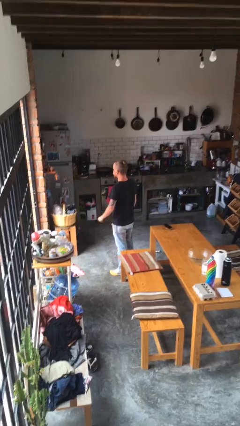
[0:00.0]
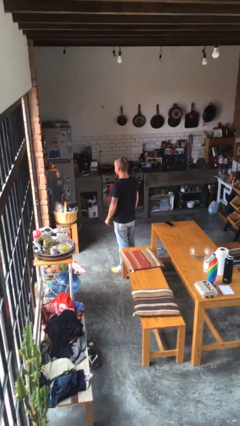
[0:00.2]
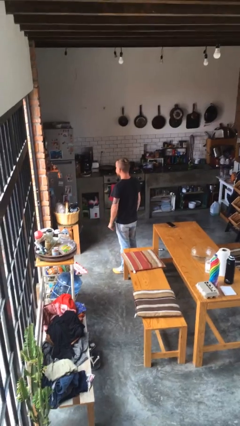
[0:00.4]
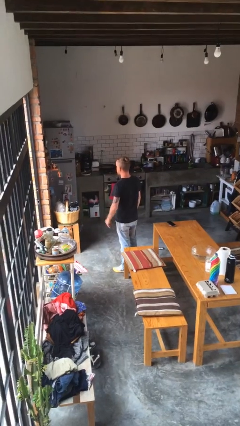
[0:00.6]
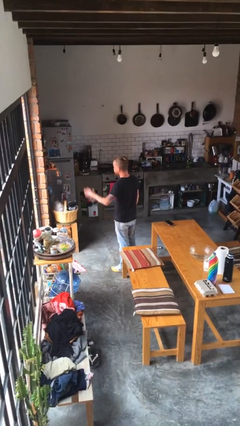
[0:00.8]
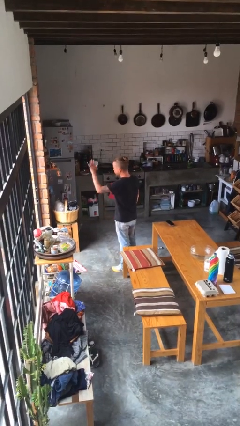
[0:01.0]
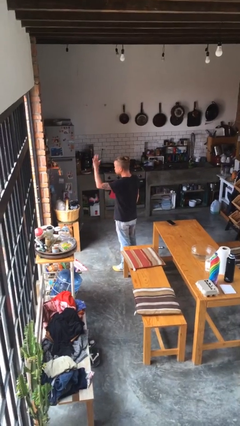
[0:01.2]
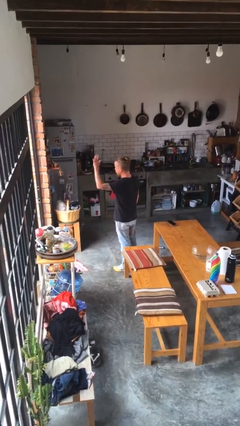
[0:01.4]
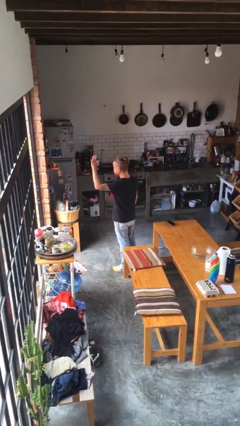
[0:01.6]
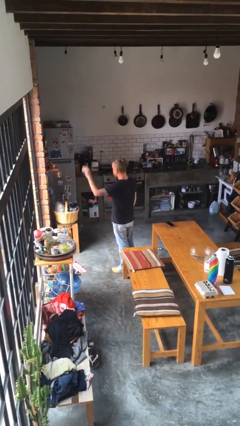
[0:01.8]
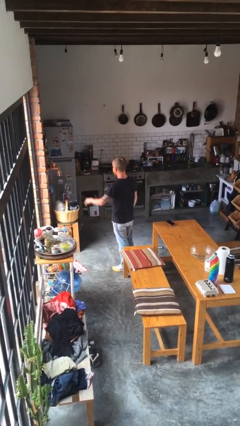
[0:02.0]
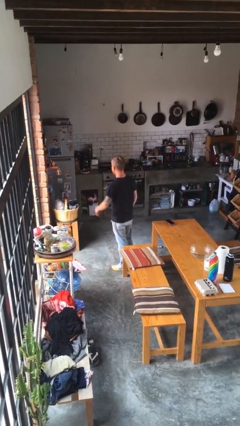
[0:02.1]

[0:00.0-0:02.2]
person gestures number five

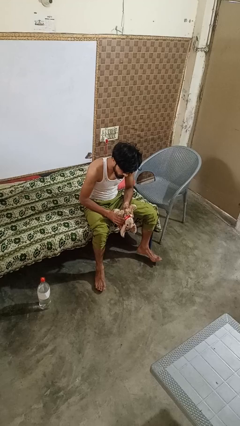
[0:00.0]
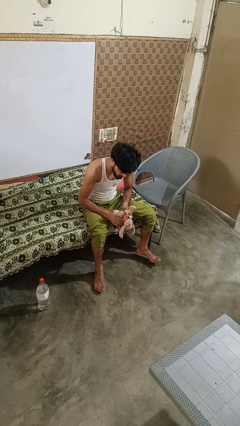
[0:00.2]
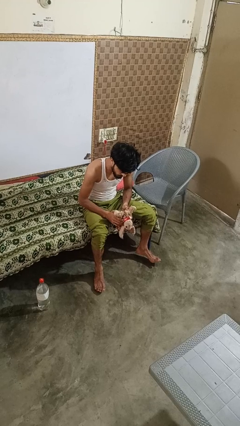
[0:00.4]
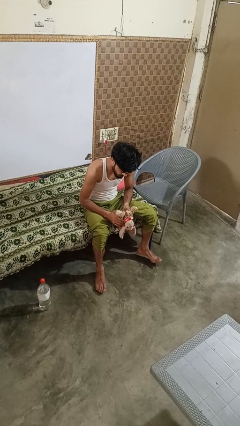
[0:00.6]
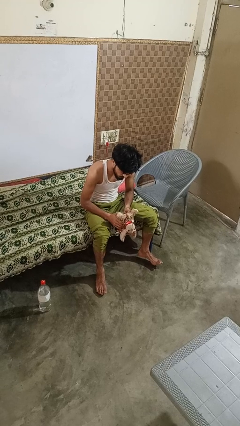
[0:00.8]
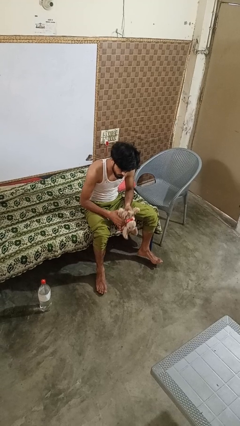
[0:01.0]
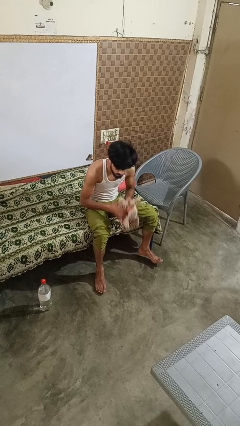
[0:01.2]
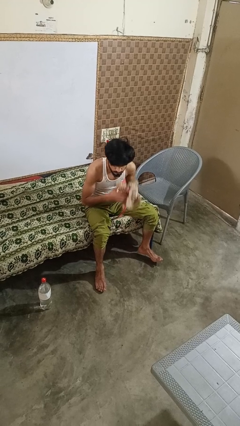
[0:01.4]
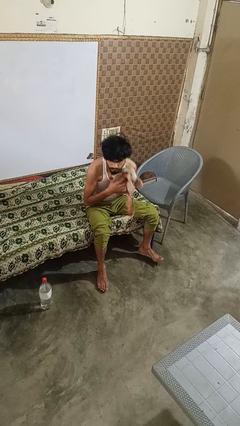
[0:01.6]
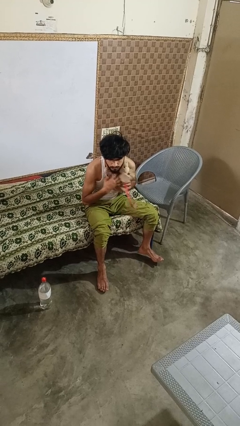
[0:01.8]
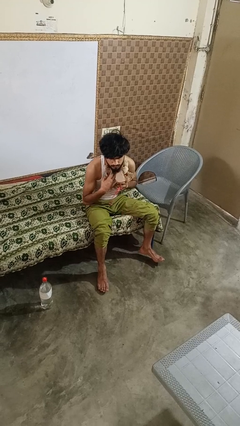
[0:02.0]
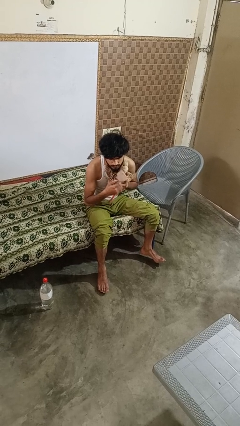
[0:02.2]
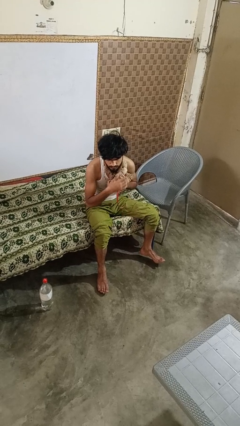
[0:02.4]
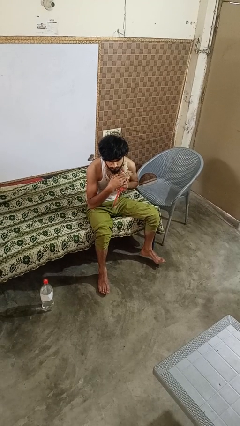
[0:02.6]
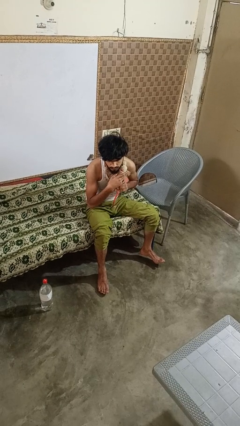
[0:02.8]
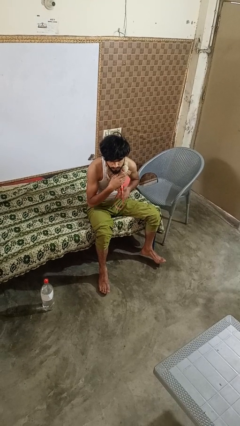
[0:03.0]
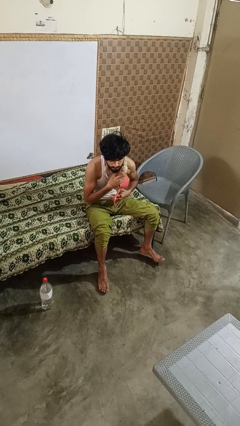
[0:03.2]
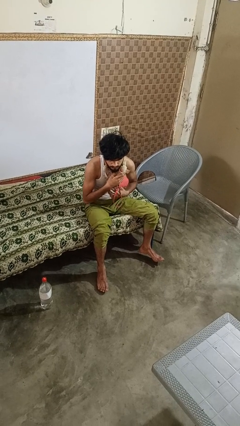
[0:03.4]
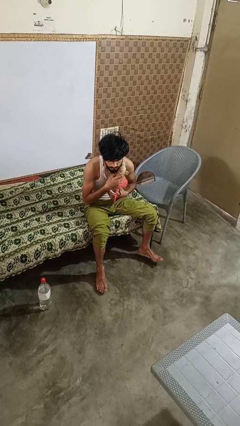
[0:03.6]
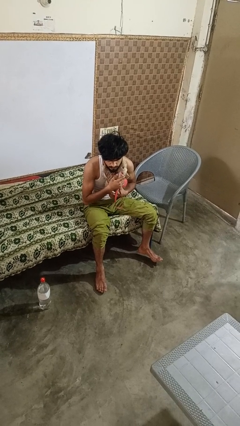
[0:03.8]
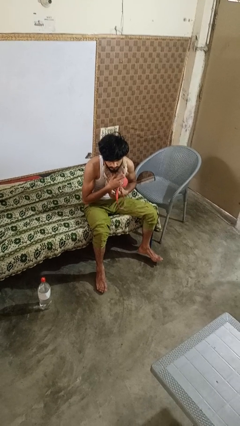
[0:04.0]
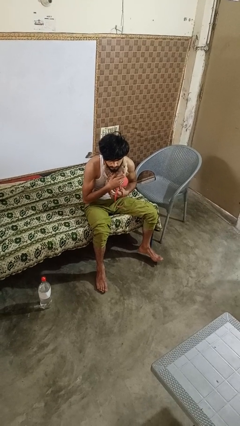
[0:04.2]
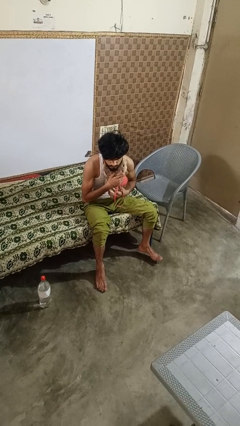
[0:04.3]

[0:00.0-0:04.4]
person hugs stuffed animal

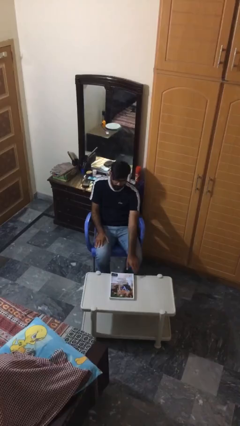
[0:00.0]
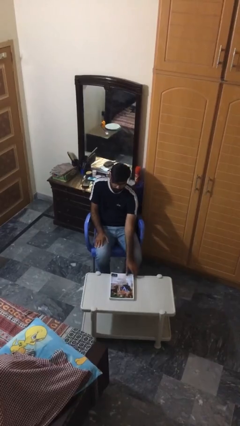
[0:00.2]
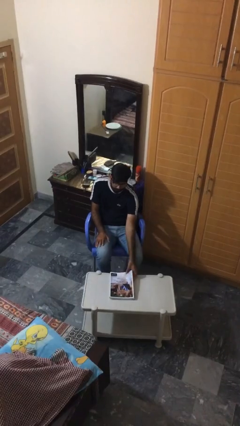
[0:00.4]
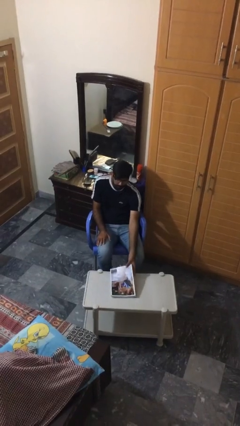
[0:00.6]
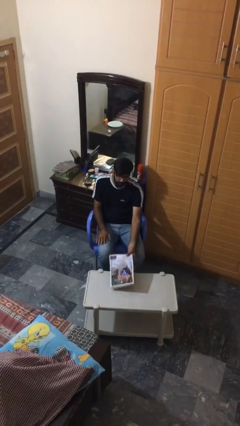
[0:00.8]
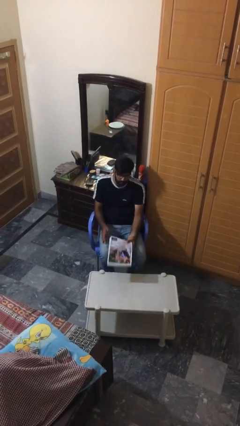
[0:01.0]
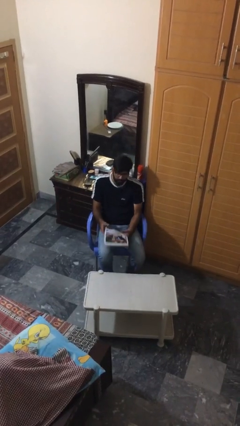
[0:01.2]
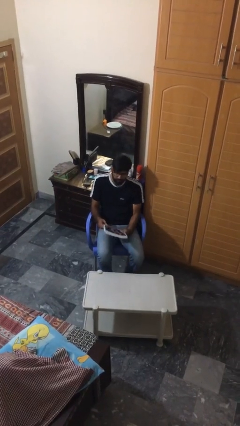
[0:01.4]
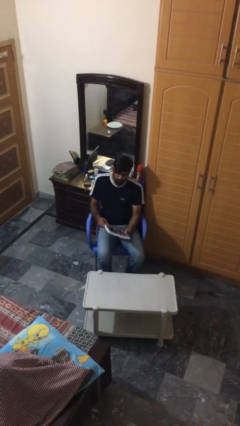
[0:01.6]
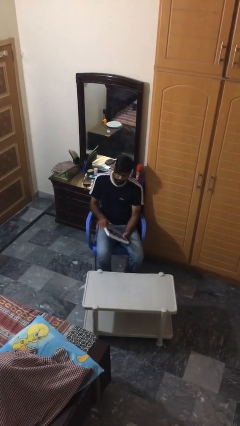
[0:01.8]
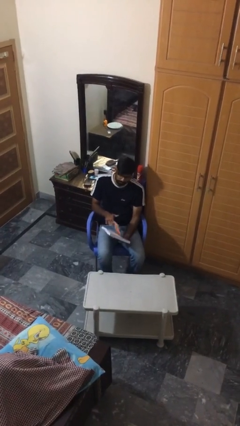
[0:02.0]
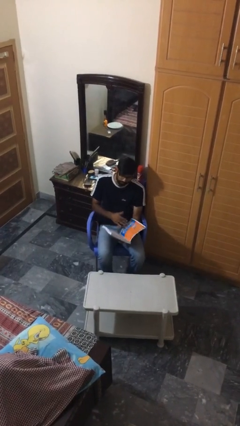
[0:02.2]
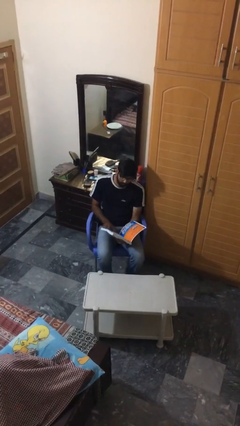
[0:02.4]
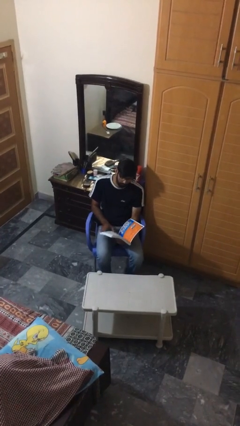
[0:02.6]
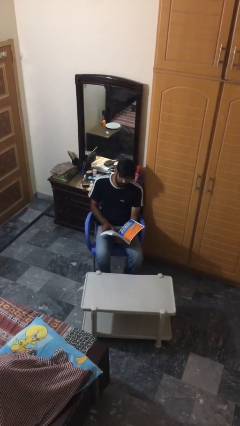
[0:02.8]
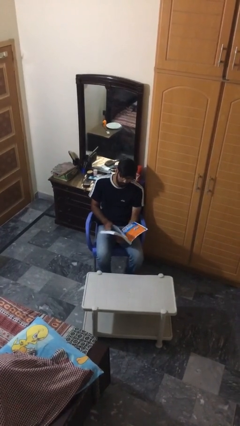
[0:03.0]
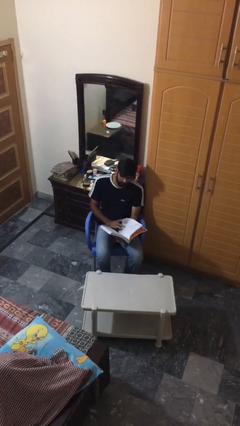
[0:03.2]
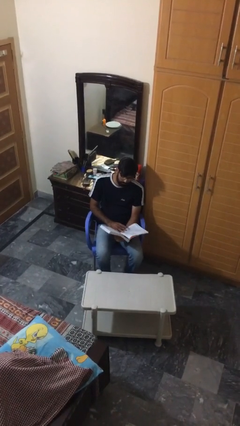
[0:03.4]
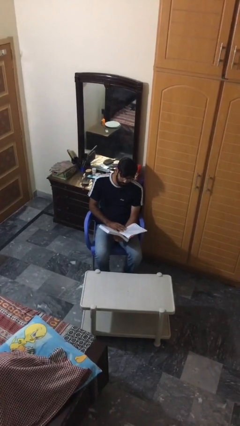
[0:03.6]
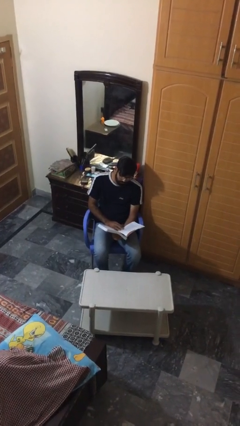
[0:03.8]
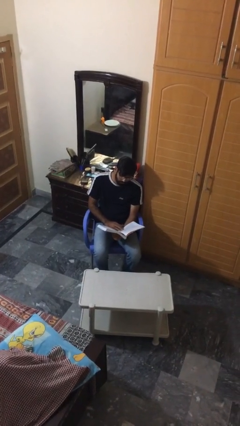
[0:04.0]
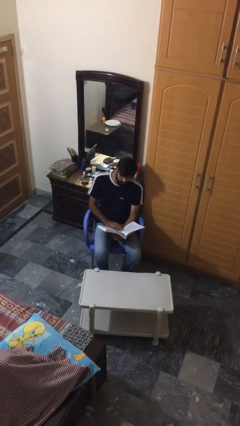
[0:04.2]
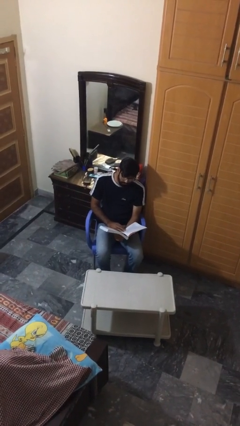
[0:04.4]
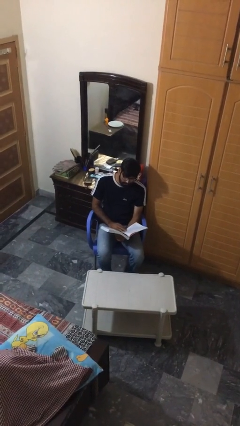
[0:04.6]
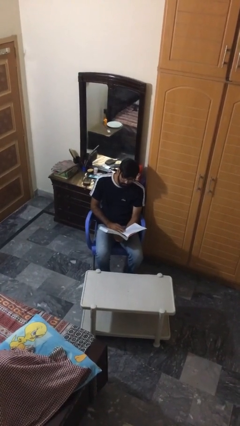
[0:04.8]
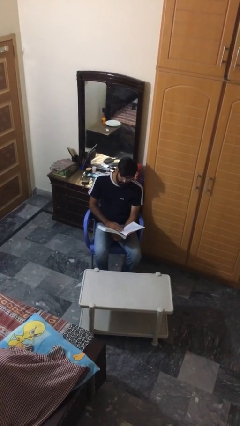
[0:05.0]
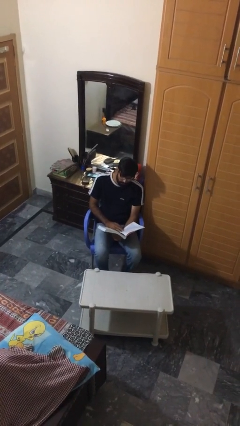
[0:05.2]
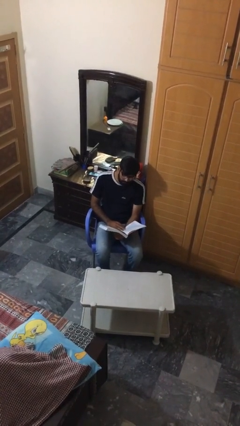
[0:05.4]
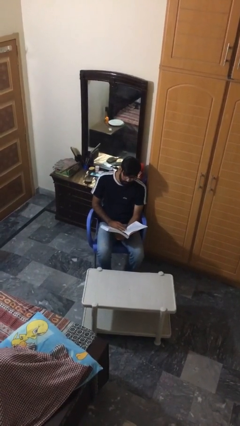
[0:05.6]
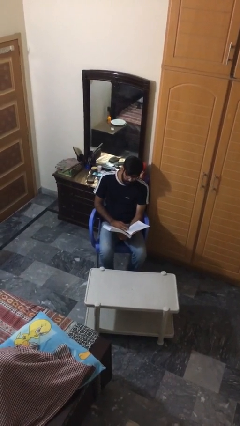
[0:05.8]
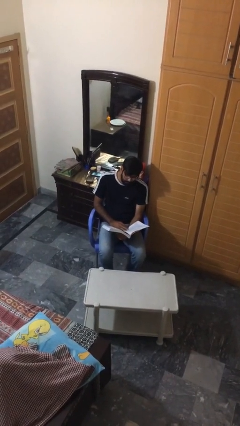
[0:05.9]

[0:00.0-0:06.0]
person reads document

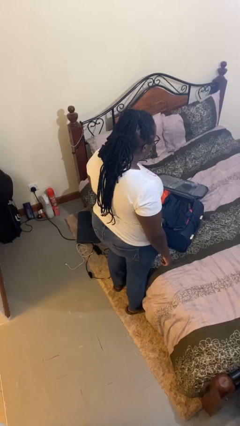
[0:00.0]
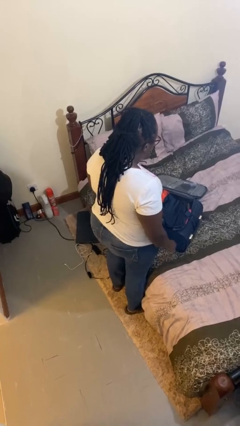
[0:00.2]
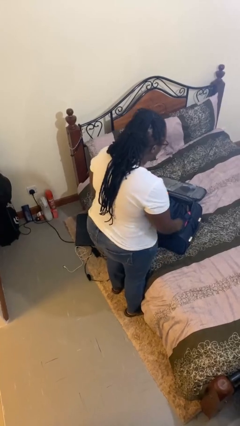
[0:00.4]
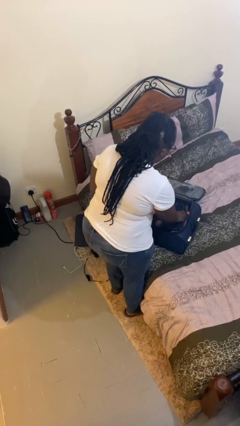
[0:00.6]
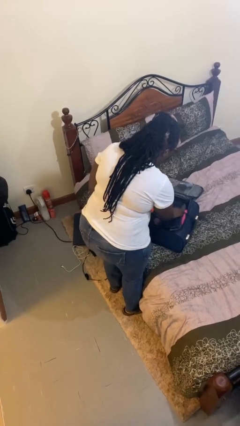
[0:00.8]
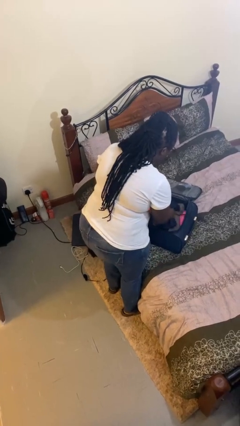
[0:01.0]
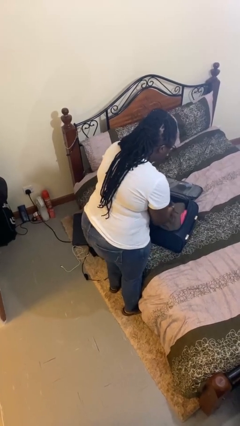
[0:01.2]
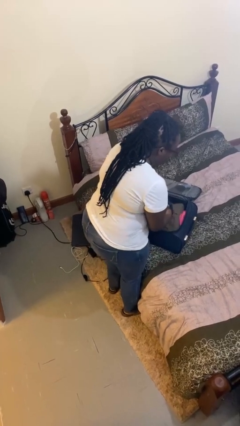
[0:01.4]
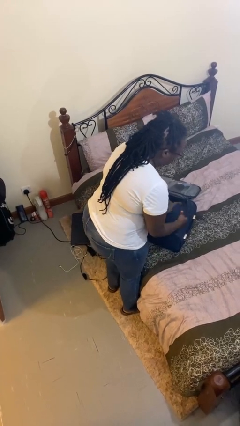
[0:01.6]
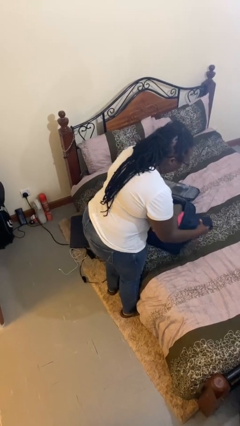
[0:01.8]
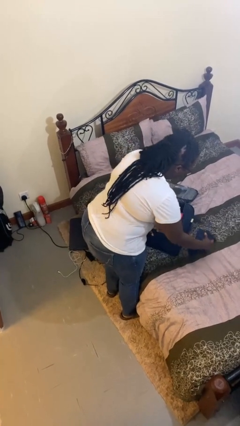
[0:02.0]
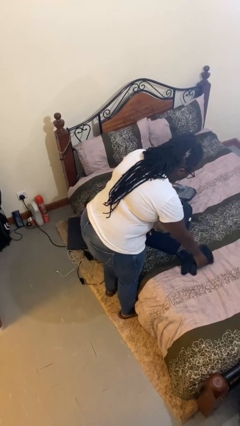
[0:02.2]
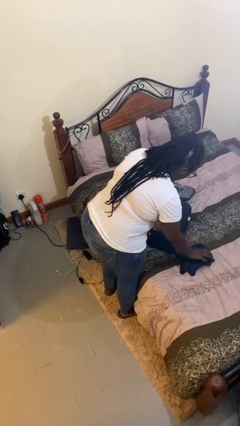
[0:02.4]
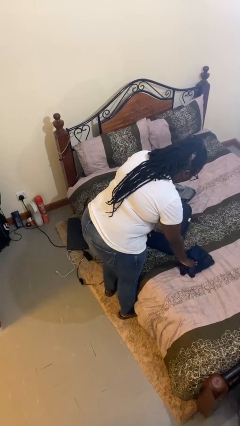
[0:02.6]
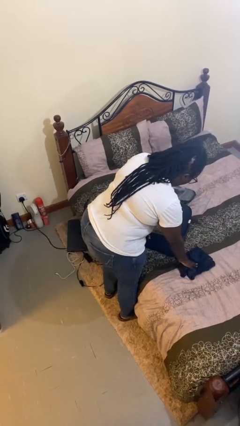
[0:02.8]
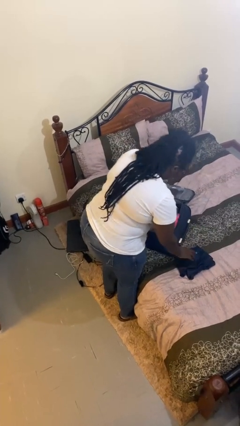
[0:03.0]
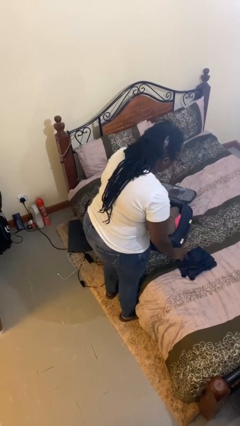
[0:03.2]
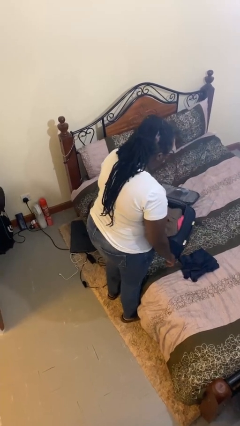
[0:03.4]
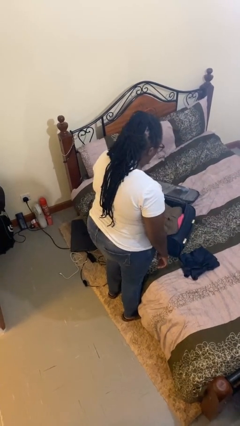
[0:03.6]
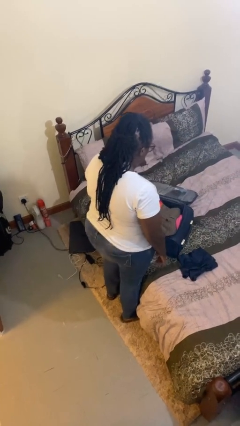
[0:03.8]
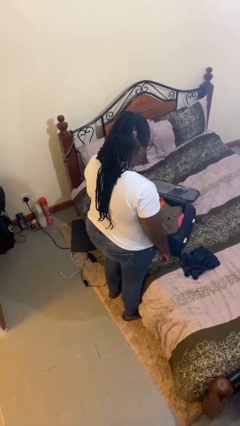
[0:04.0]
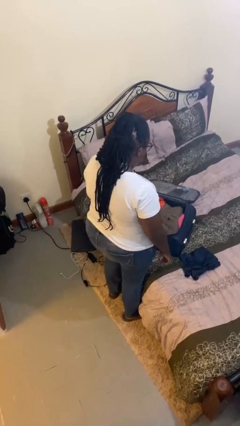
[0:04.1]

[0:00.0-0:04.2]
person unloads clothes from suitcase

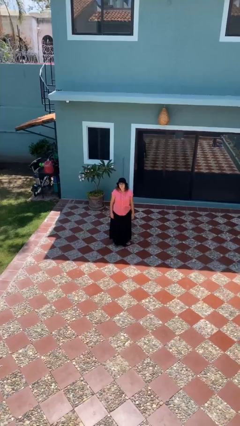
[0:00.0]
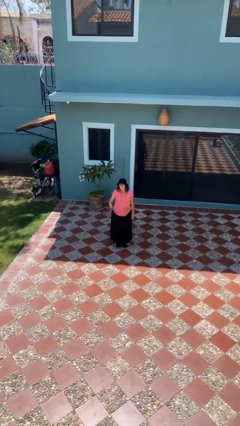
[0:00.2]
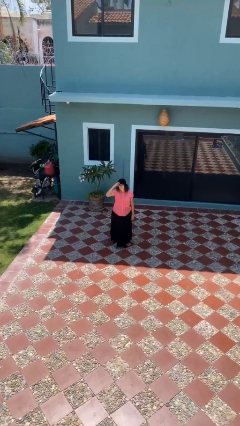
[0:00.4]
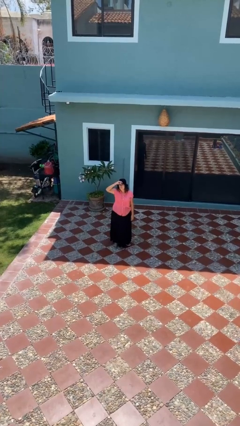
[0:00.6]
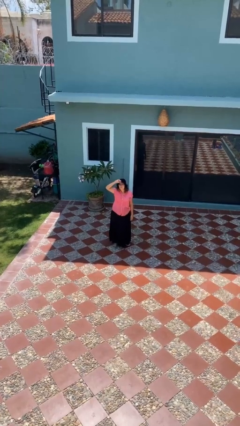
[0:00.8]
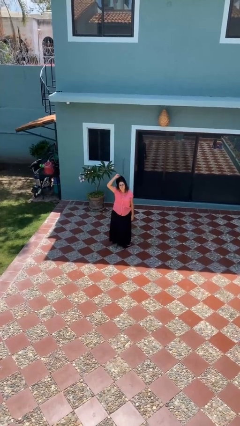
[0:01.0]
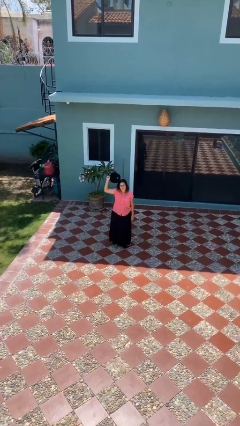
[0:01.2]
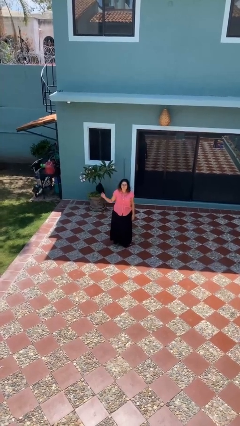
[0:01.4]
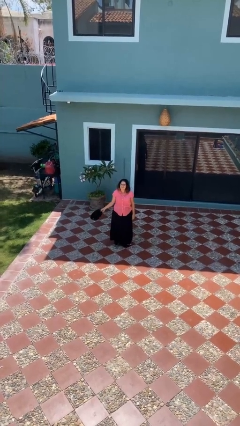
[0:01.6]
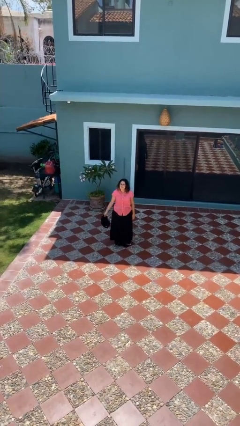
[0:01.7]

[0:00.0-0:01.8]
person takes off hat
